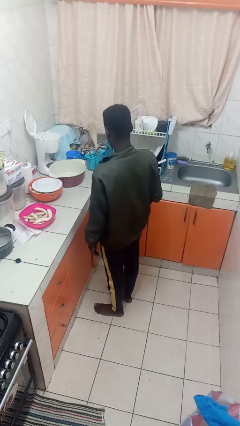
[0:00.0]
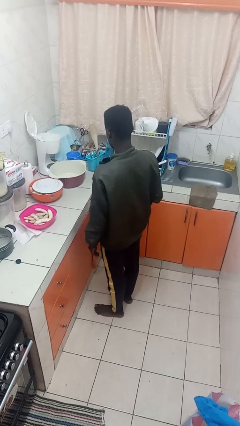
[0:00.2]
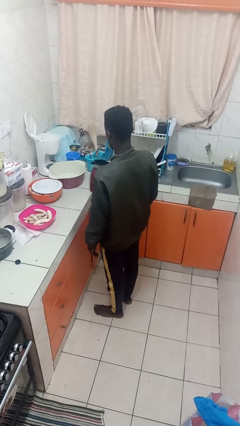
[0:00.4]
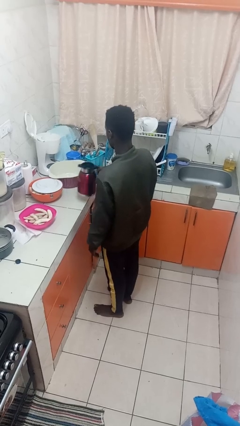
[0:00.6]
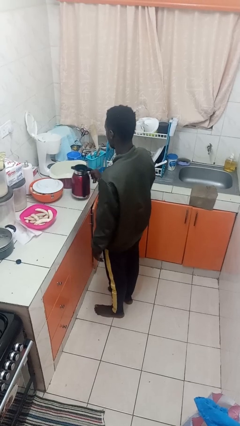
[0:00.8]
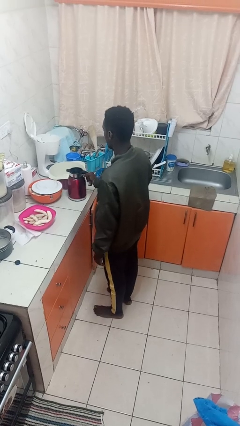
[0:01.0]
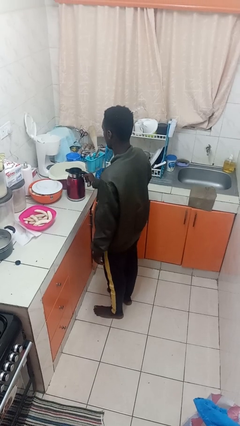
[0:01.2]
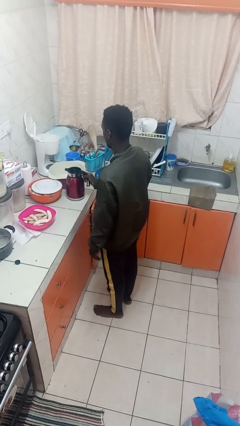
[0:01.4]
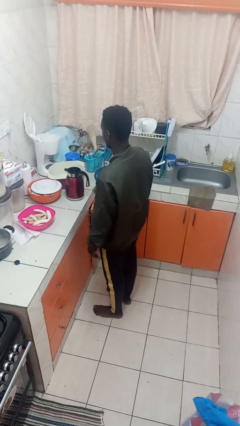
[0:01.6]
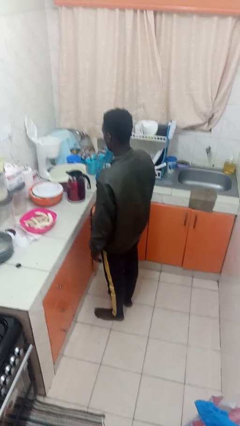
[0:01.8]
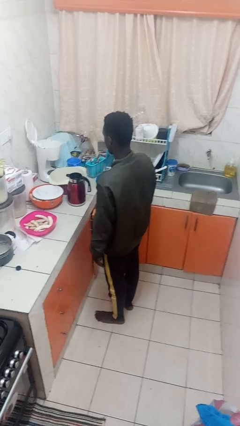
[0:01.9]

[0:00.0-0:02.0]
person puts down object on countertop

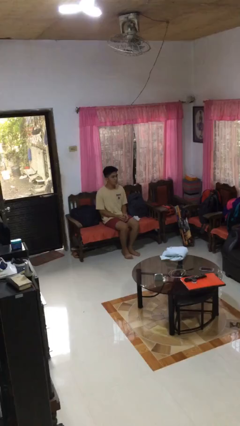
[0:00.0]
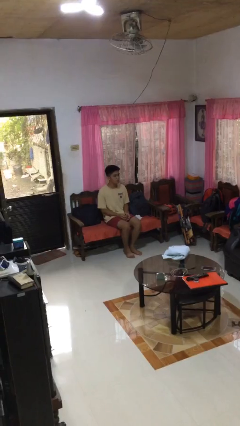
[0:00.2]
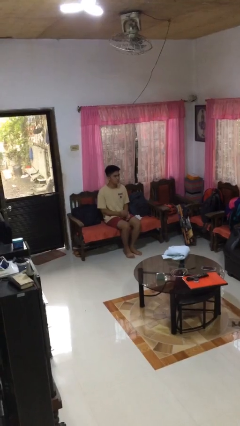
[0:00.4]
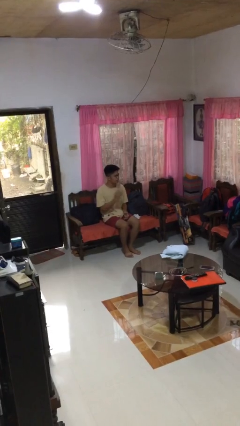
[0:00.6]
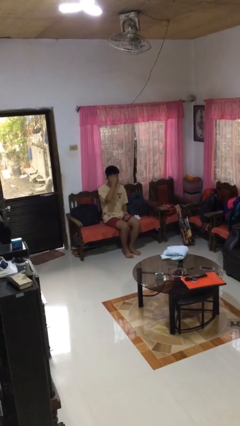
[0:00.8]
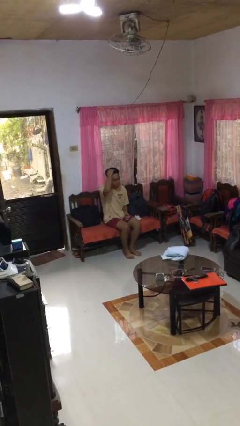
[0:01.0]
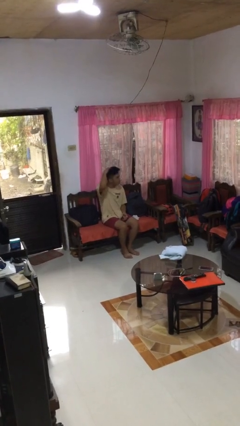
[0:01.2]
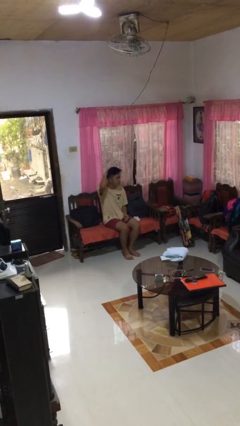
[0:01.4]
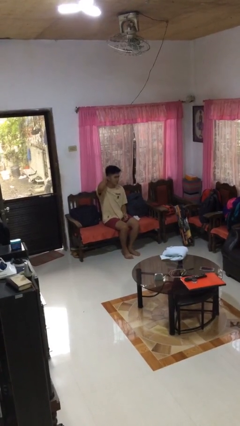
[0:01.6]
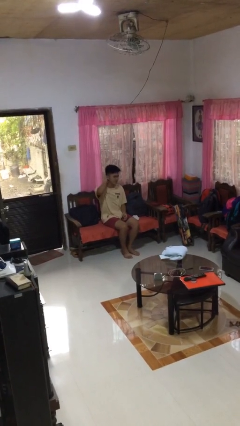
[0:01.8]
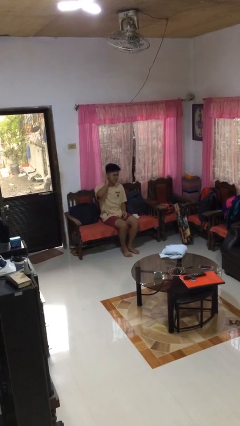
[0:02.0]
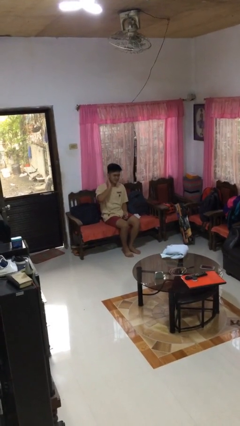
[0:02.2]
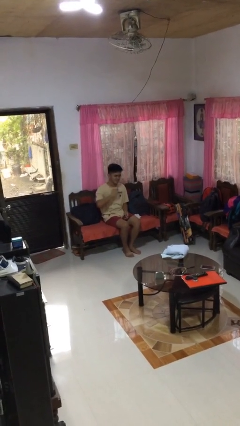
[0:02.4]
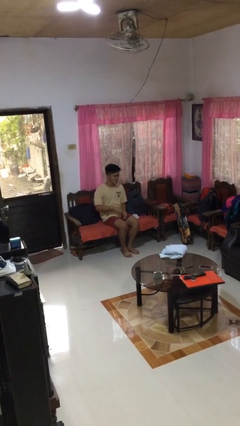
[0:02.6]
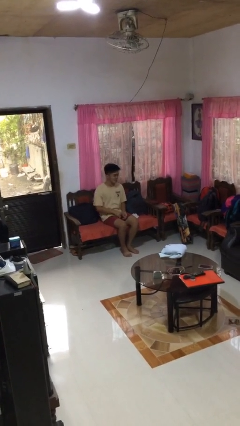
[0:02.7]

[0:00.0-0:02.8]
person strokes hair

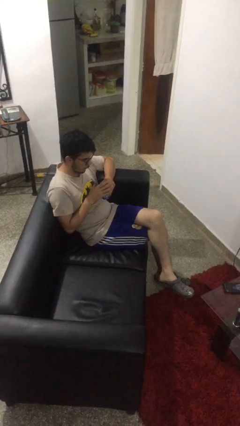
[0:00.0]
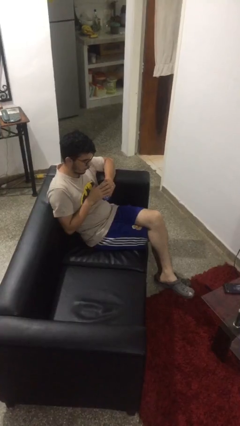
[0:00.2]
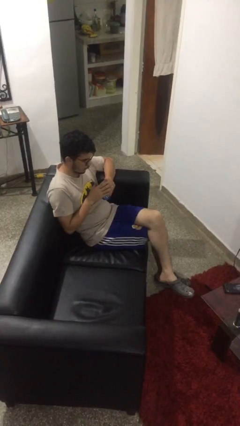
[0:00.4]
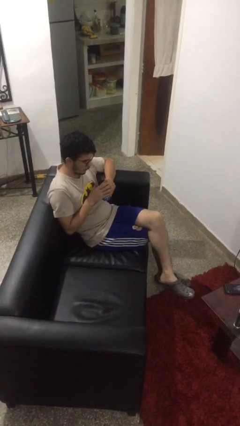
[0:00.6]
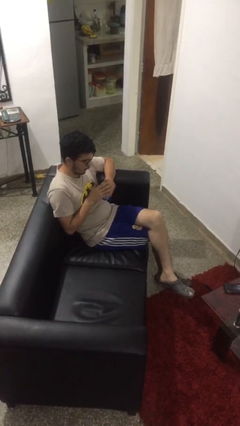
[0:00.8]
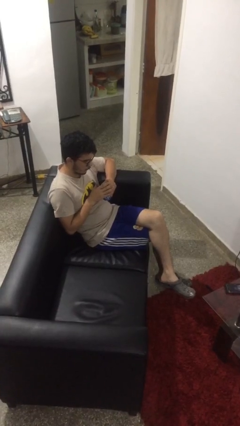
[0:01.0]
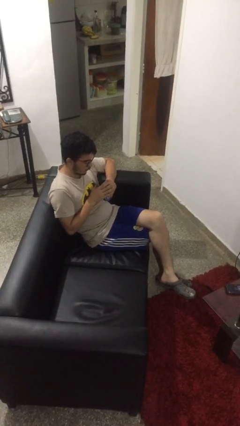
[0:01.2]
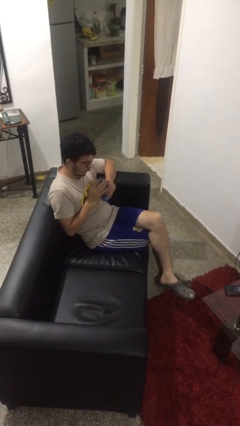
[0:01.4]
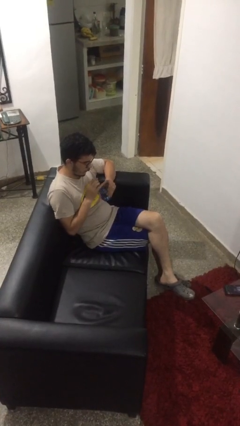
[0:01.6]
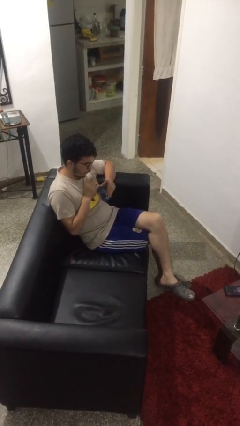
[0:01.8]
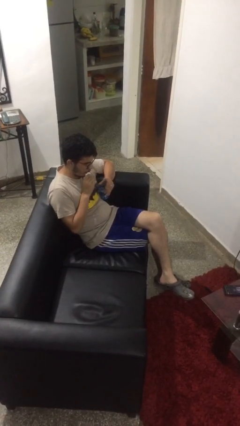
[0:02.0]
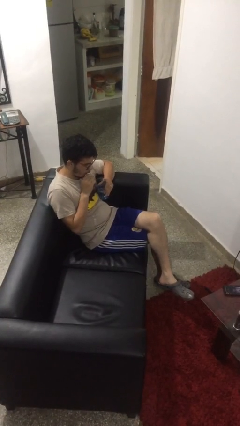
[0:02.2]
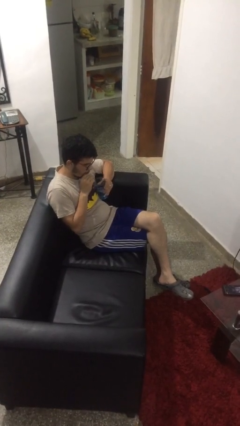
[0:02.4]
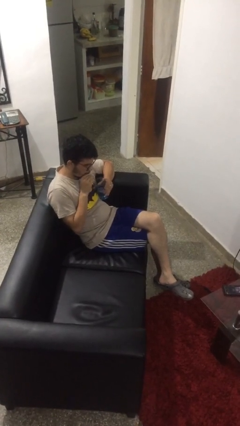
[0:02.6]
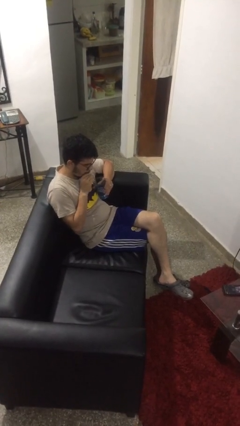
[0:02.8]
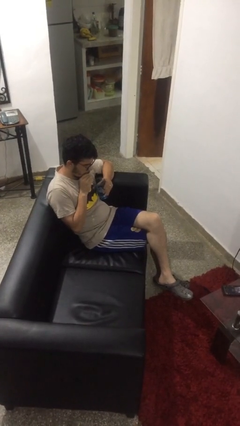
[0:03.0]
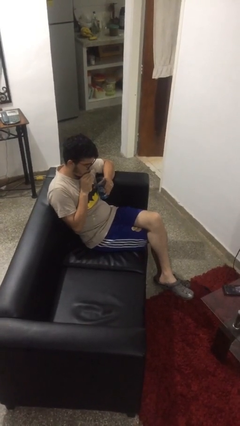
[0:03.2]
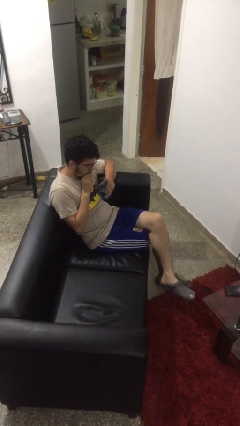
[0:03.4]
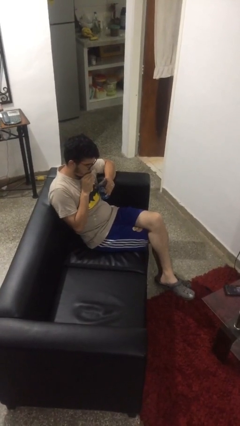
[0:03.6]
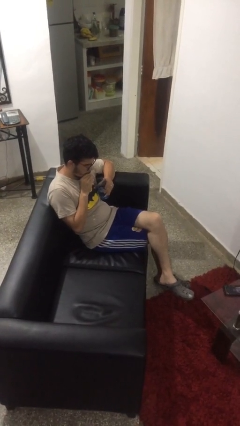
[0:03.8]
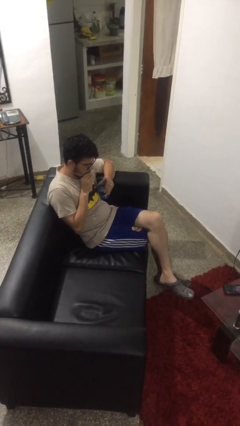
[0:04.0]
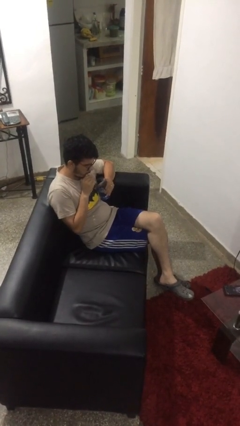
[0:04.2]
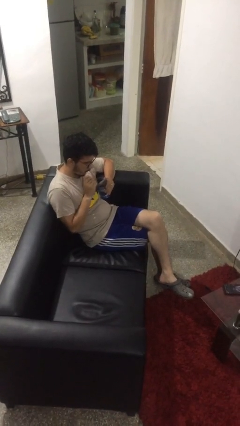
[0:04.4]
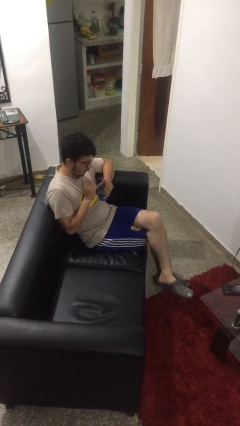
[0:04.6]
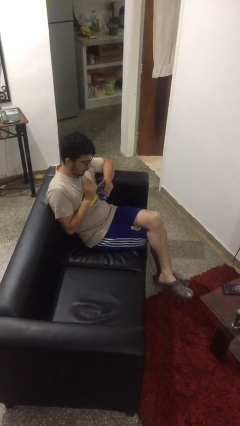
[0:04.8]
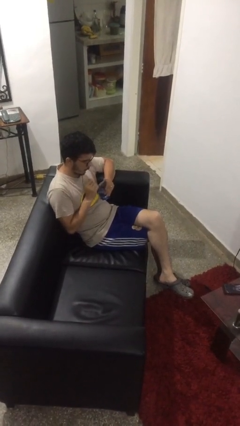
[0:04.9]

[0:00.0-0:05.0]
person drinks from straw

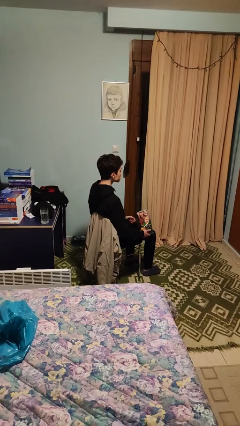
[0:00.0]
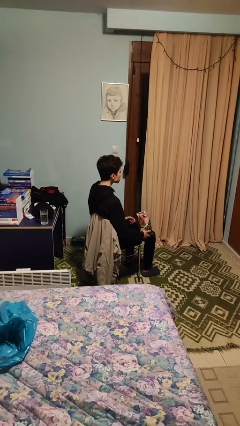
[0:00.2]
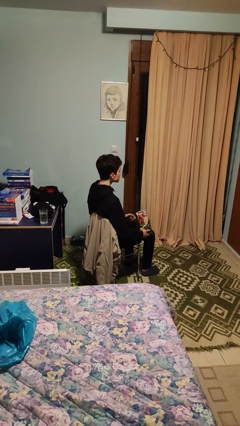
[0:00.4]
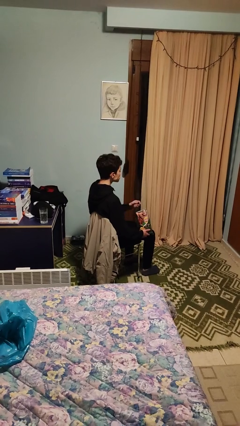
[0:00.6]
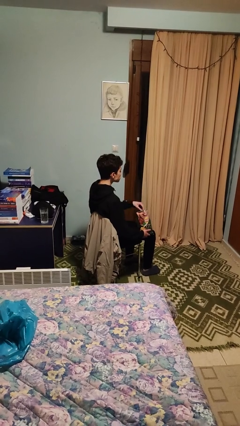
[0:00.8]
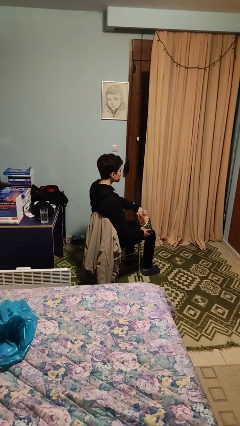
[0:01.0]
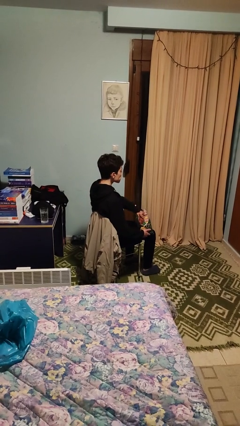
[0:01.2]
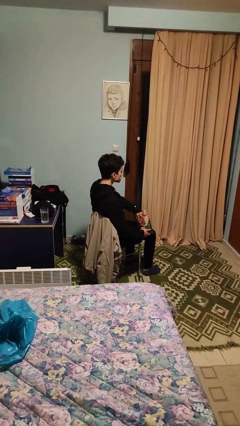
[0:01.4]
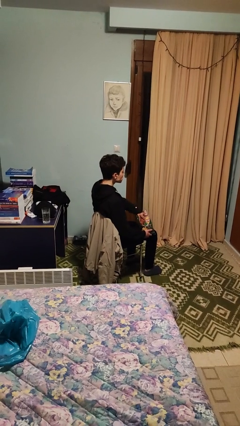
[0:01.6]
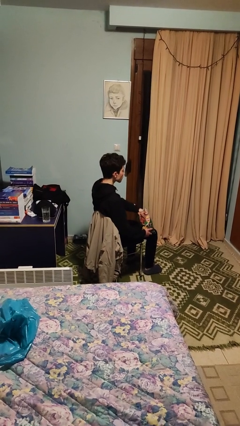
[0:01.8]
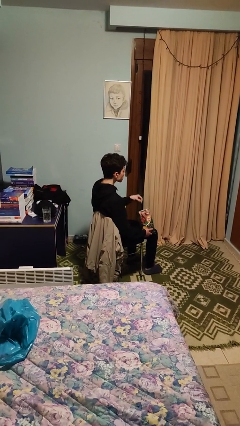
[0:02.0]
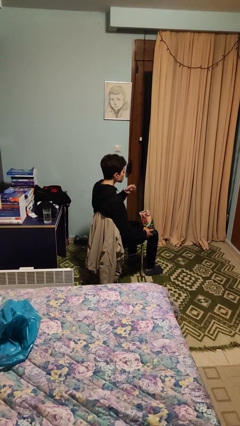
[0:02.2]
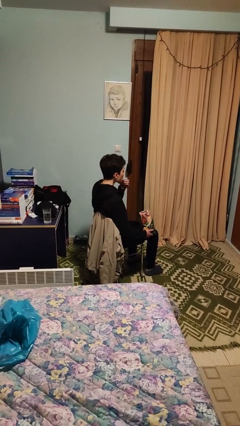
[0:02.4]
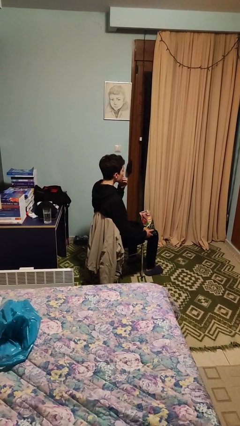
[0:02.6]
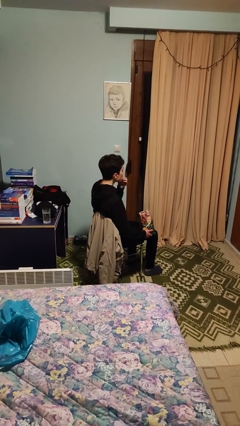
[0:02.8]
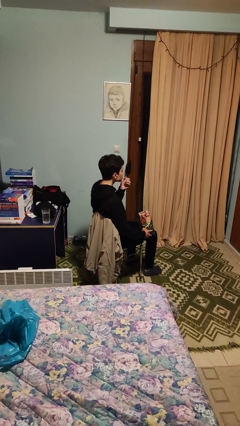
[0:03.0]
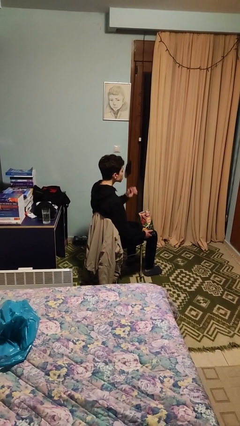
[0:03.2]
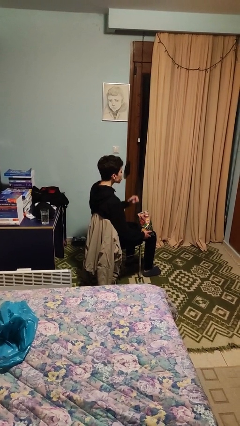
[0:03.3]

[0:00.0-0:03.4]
person eats snack from bag

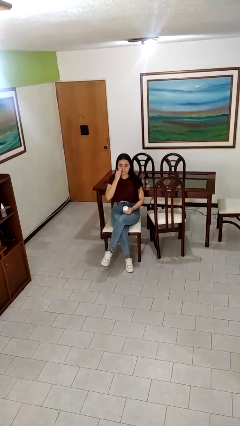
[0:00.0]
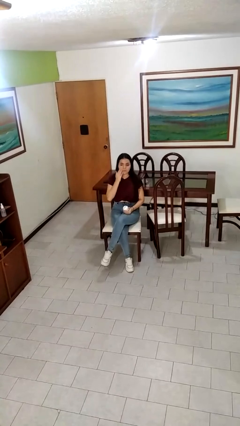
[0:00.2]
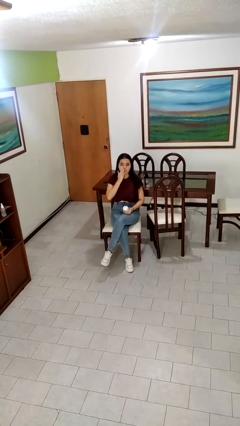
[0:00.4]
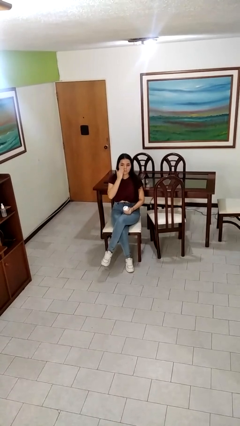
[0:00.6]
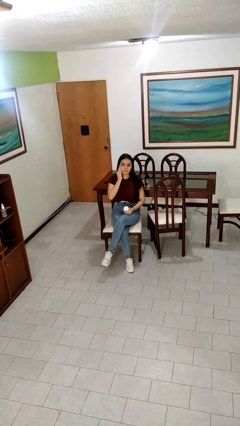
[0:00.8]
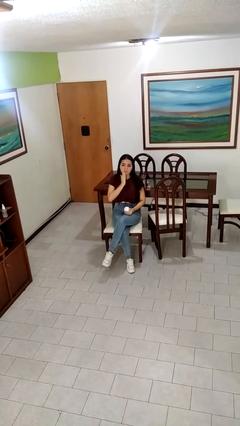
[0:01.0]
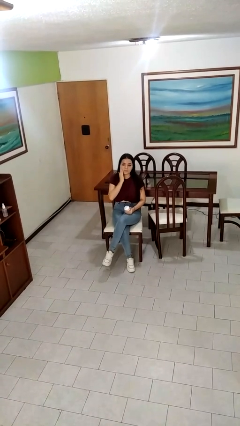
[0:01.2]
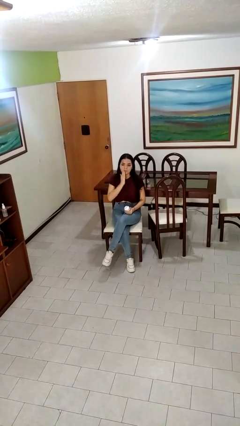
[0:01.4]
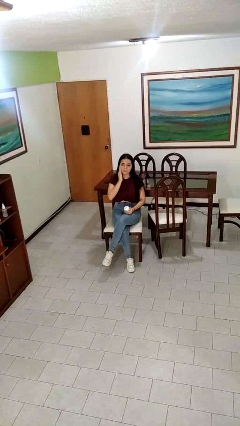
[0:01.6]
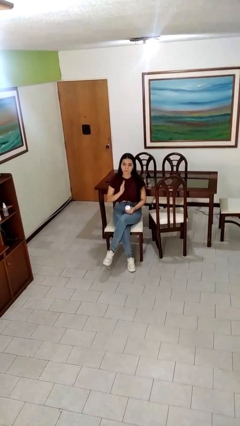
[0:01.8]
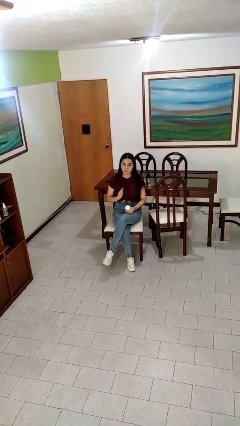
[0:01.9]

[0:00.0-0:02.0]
person applies facial moisturizer

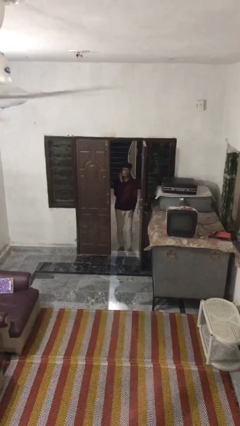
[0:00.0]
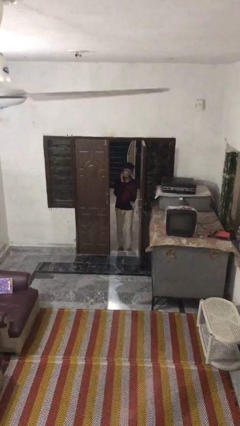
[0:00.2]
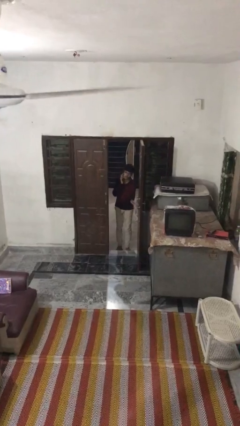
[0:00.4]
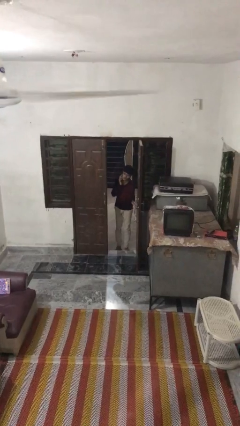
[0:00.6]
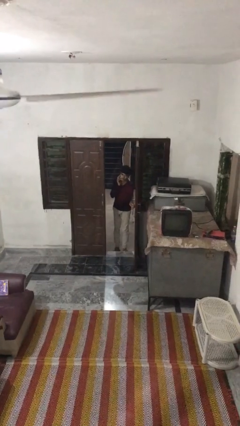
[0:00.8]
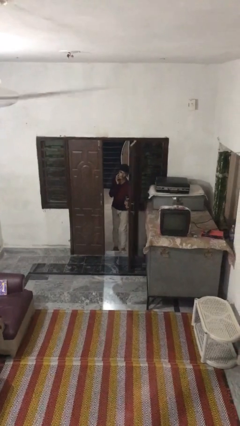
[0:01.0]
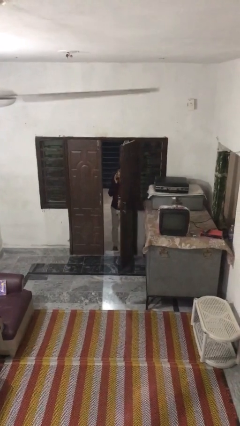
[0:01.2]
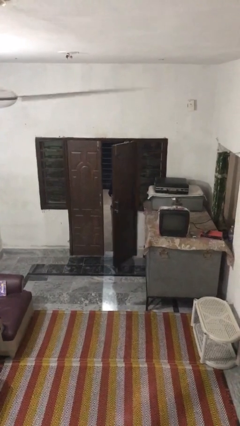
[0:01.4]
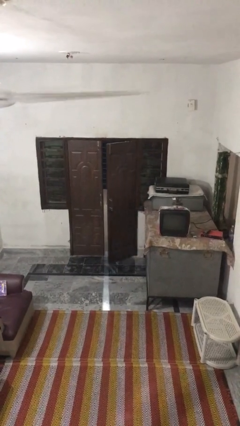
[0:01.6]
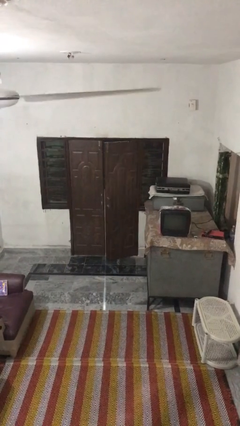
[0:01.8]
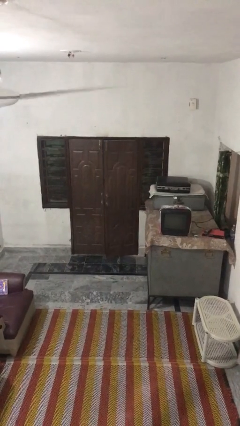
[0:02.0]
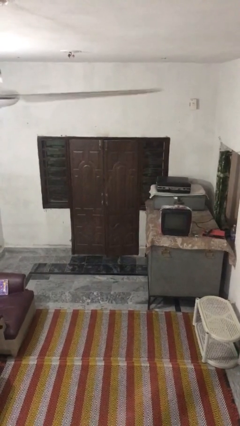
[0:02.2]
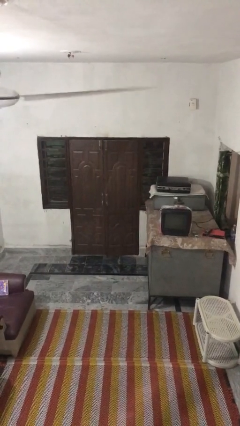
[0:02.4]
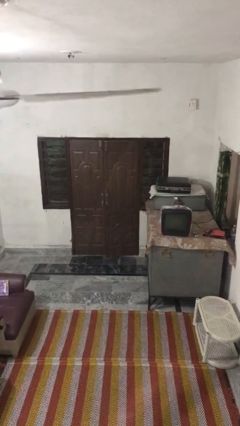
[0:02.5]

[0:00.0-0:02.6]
person closes facility door
